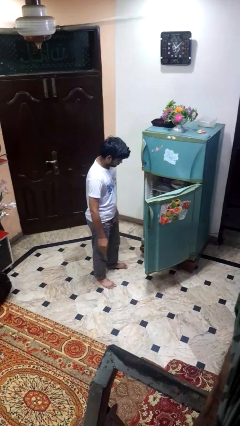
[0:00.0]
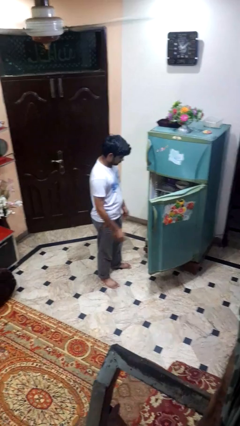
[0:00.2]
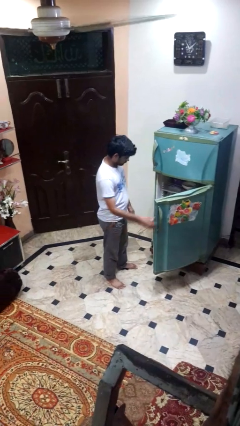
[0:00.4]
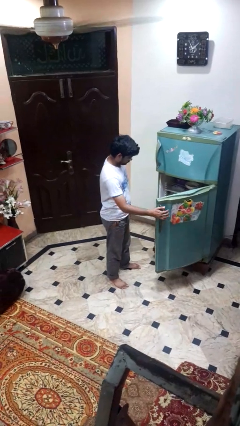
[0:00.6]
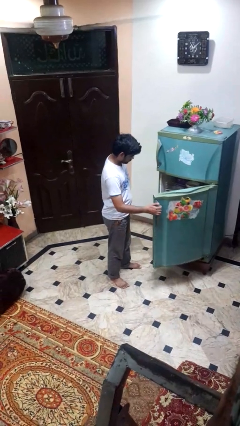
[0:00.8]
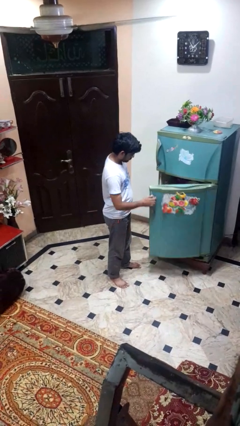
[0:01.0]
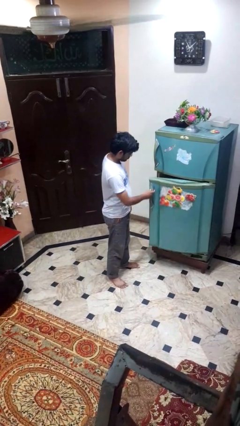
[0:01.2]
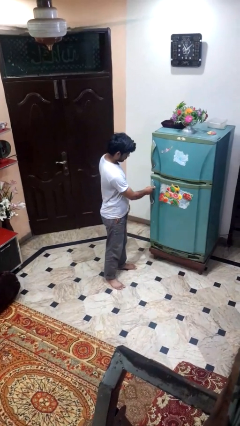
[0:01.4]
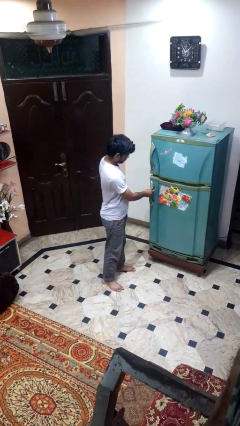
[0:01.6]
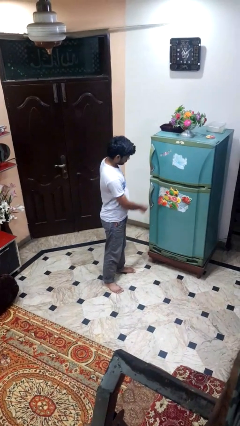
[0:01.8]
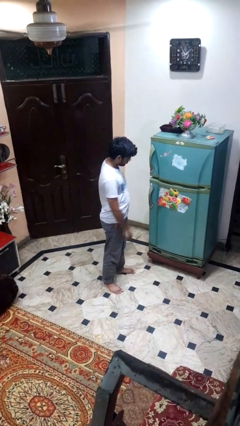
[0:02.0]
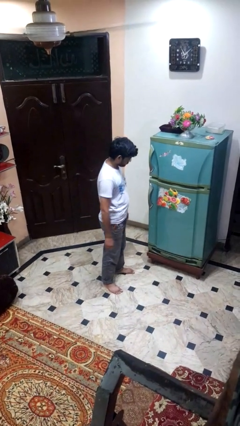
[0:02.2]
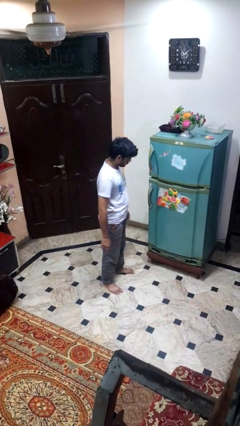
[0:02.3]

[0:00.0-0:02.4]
person closes refrigerator

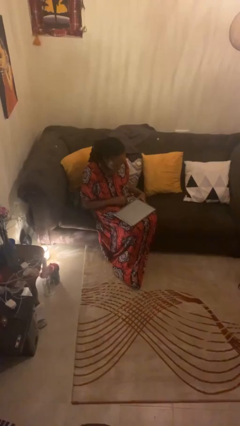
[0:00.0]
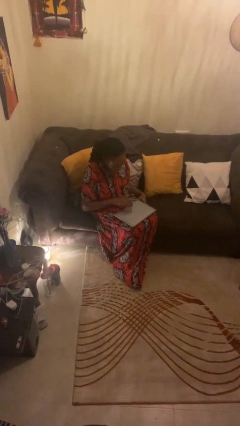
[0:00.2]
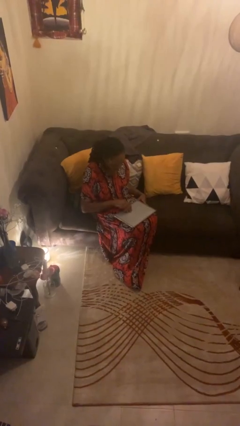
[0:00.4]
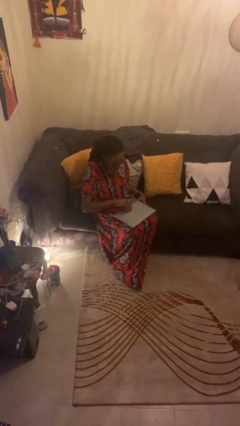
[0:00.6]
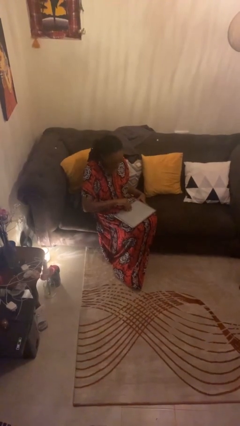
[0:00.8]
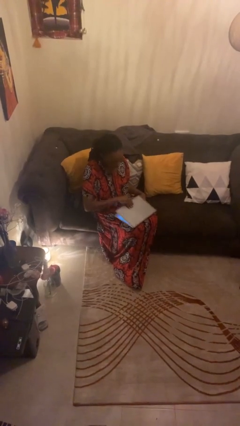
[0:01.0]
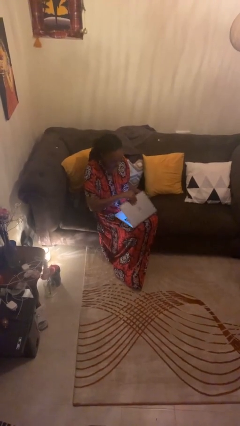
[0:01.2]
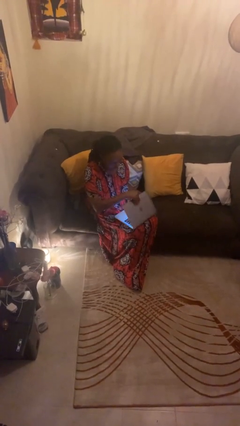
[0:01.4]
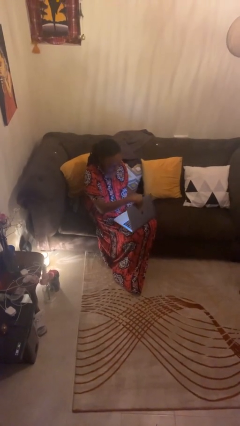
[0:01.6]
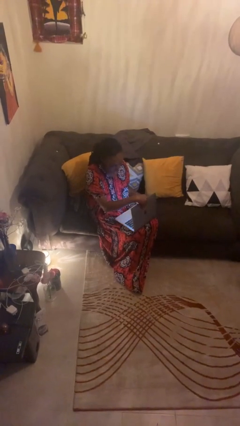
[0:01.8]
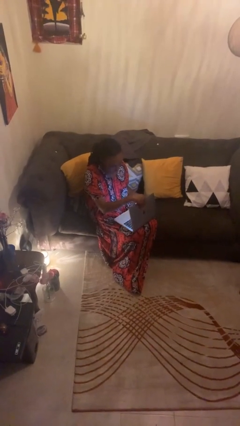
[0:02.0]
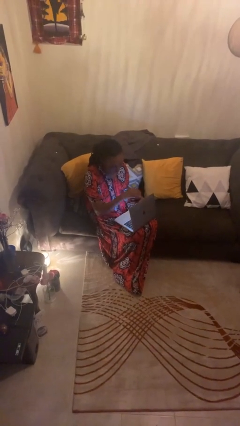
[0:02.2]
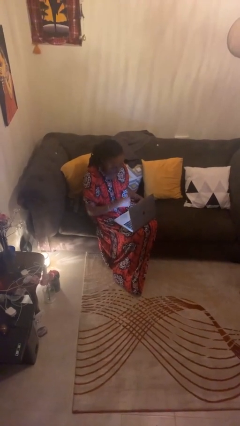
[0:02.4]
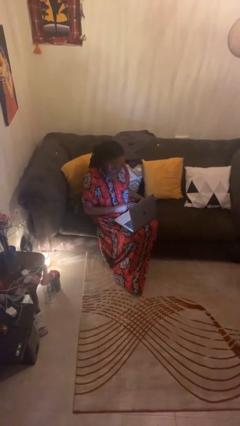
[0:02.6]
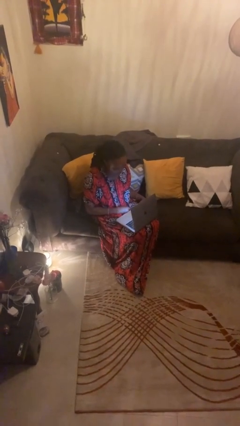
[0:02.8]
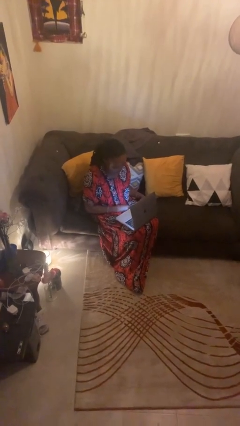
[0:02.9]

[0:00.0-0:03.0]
person opens laptop

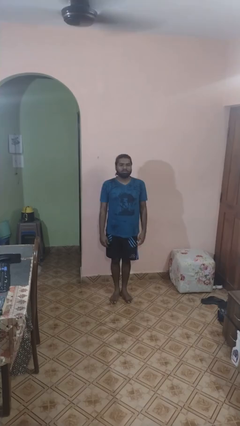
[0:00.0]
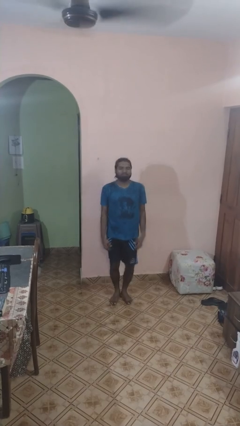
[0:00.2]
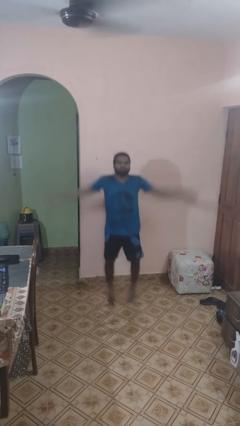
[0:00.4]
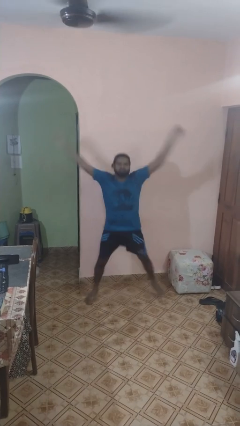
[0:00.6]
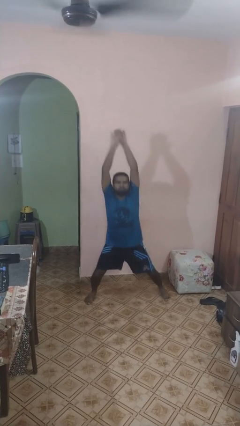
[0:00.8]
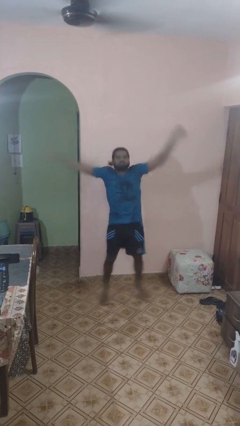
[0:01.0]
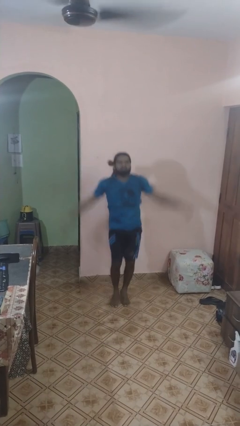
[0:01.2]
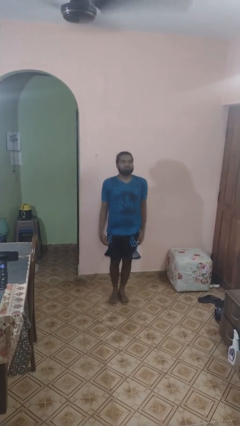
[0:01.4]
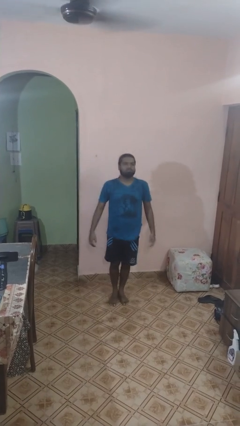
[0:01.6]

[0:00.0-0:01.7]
person exercises with jumping jacks

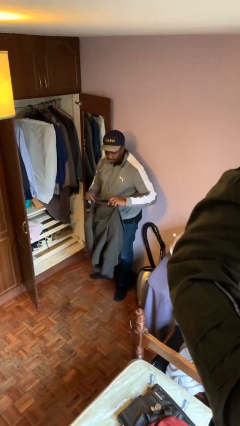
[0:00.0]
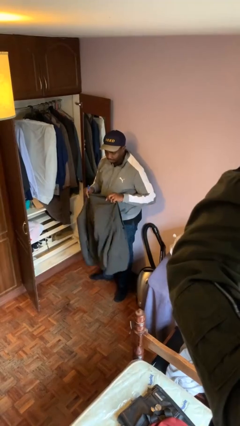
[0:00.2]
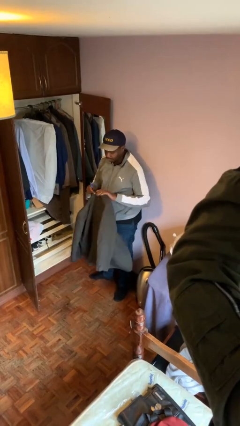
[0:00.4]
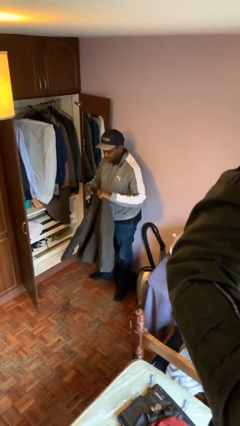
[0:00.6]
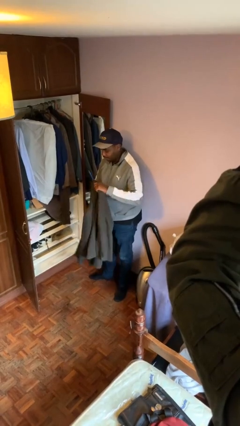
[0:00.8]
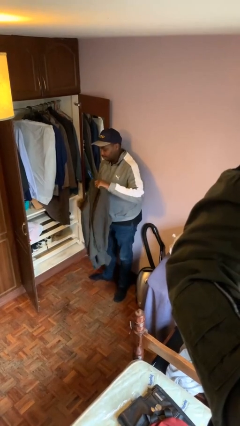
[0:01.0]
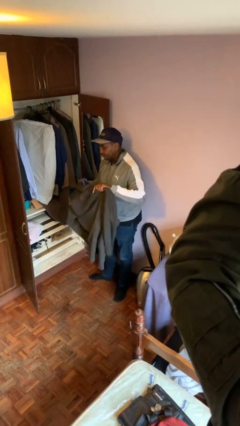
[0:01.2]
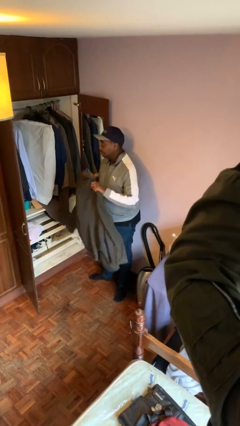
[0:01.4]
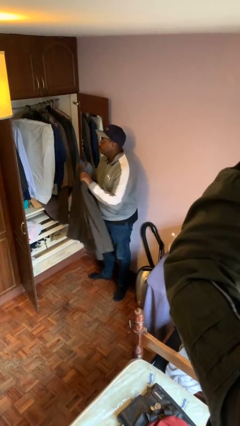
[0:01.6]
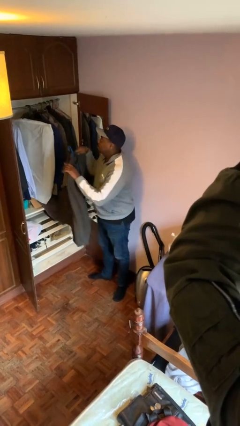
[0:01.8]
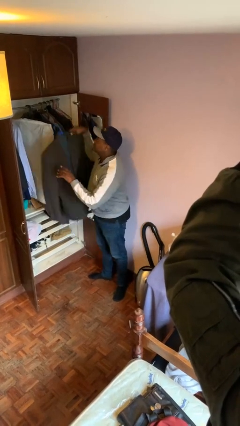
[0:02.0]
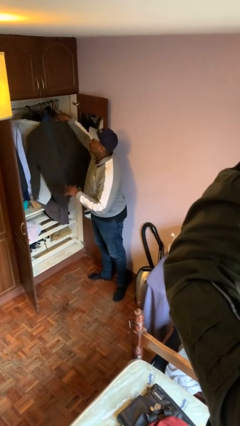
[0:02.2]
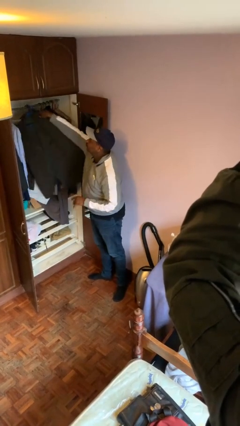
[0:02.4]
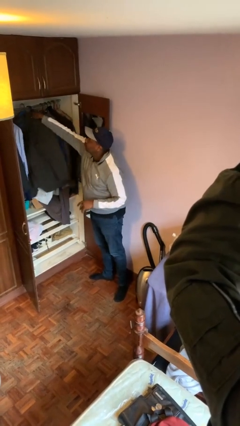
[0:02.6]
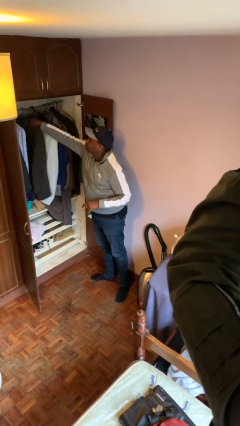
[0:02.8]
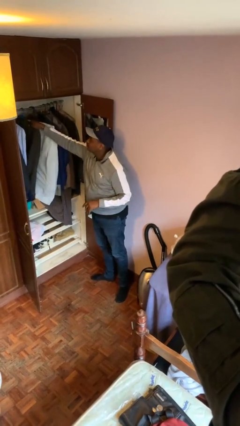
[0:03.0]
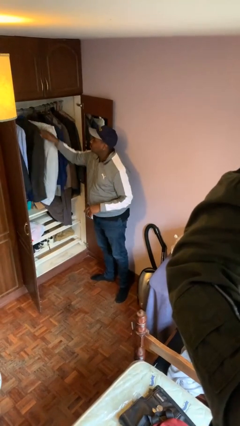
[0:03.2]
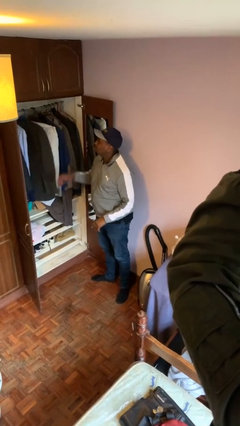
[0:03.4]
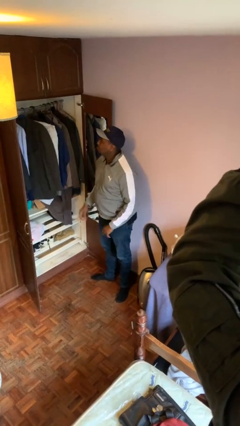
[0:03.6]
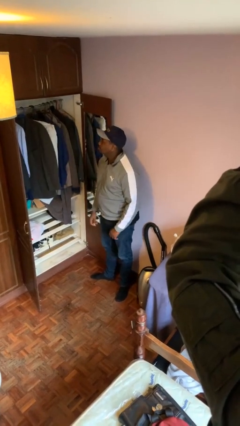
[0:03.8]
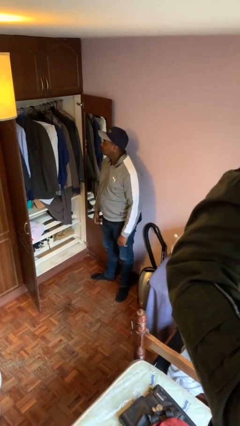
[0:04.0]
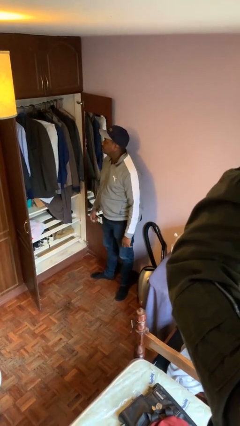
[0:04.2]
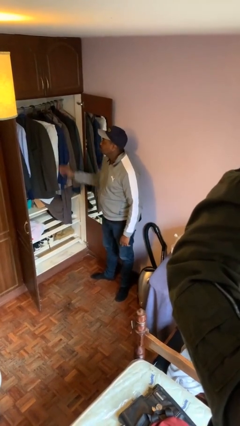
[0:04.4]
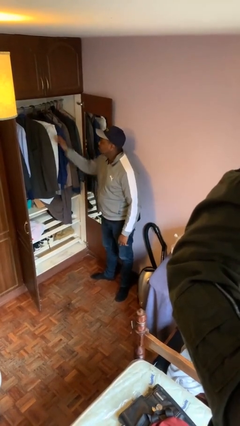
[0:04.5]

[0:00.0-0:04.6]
person puts clothes into closet

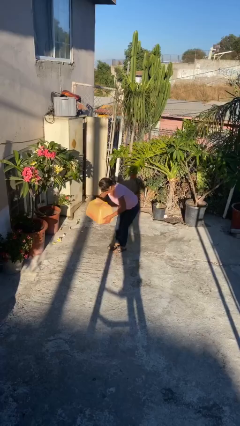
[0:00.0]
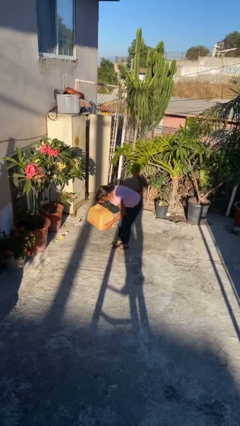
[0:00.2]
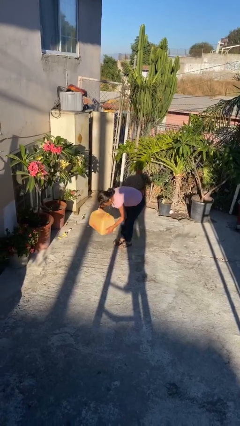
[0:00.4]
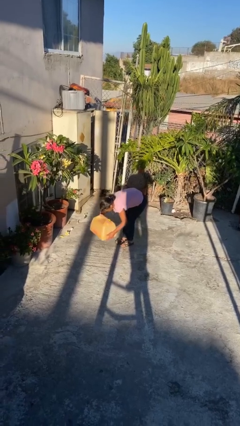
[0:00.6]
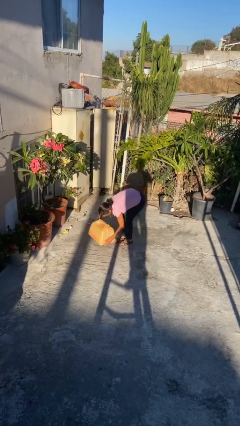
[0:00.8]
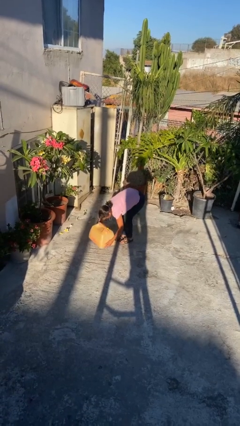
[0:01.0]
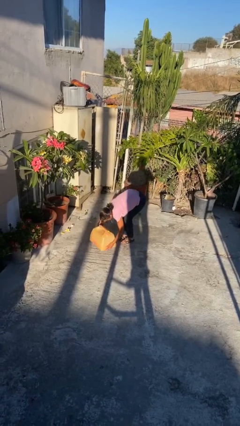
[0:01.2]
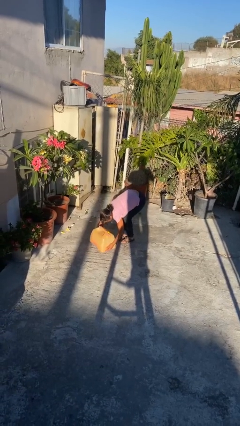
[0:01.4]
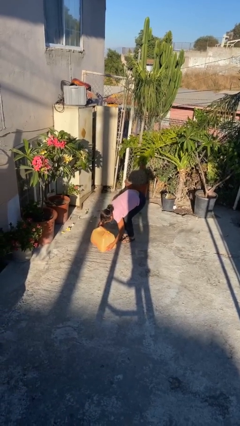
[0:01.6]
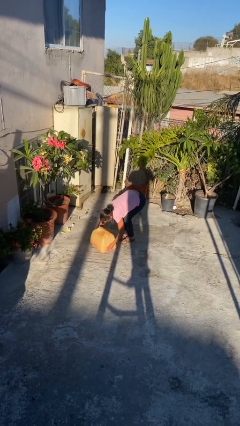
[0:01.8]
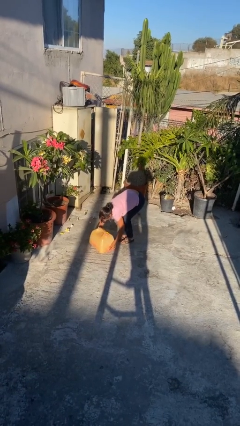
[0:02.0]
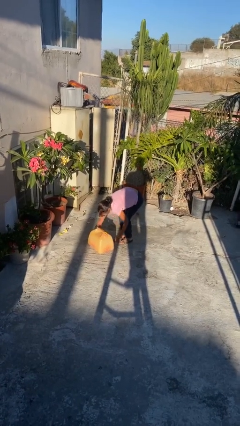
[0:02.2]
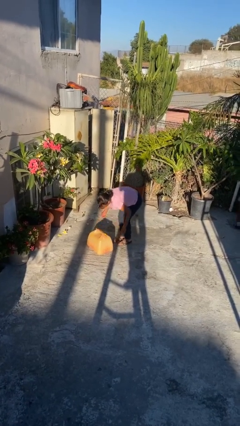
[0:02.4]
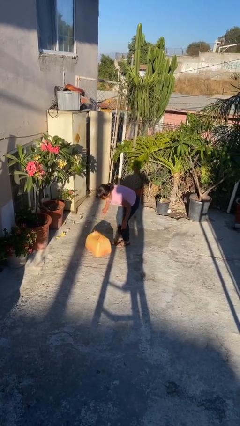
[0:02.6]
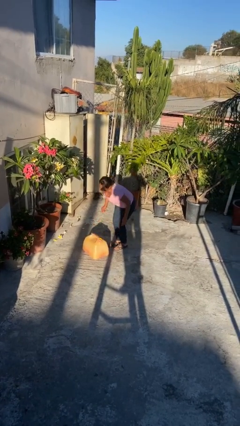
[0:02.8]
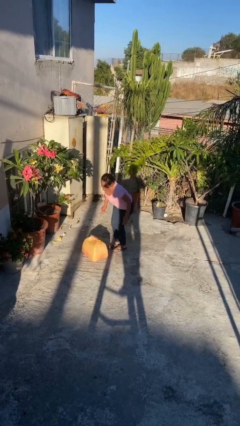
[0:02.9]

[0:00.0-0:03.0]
person puts down object on floor

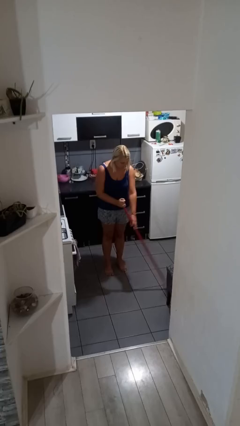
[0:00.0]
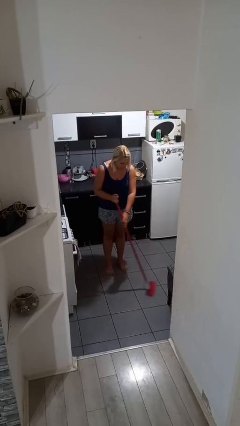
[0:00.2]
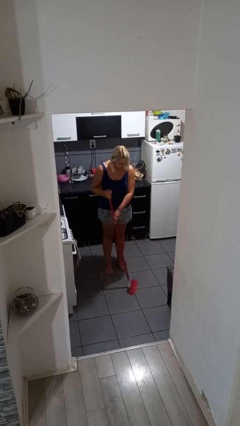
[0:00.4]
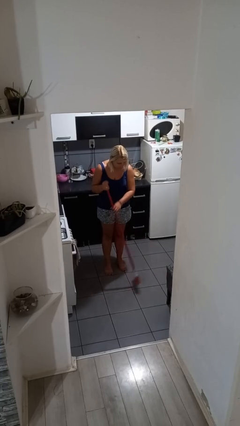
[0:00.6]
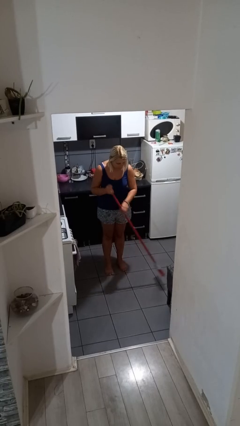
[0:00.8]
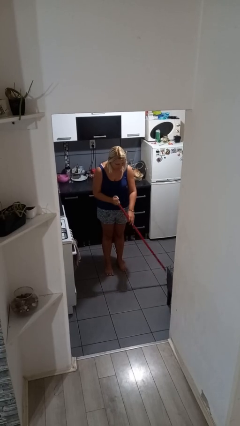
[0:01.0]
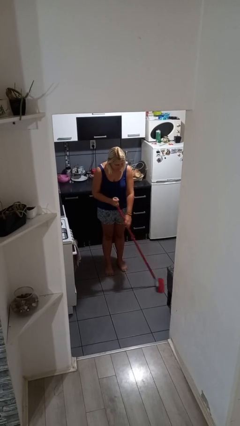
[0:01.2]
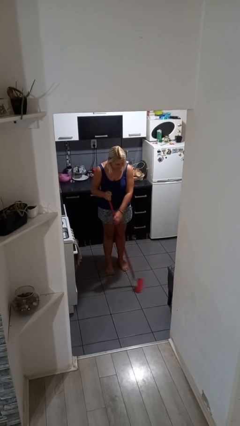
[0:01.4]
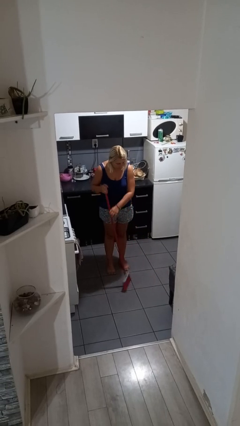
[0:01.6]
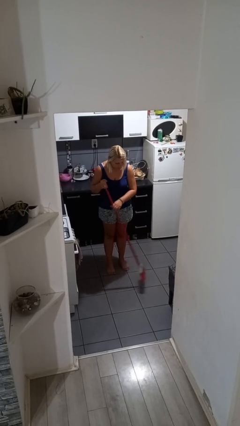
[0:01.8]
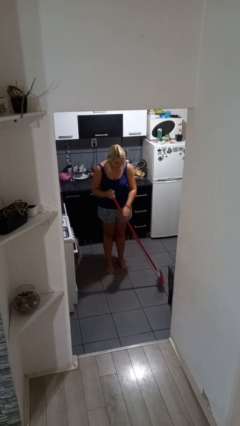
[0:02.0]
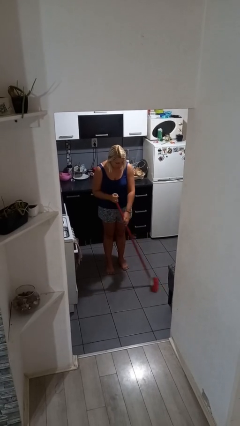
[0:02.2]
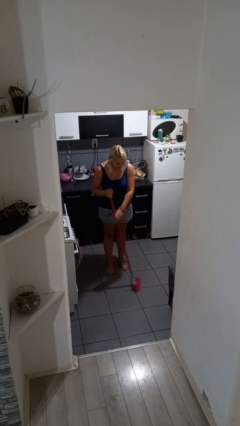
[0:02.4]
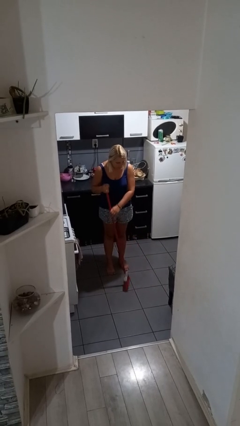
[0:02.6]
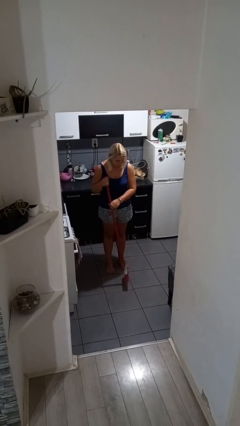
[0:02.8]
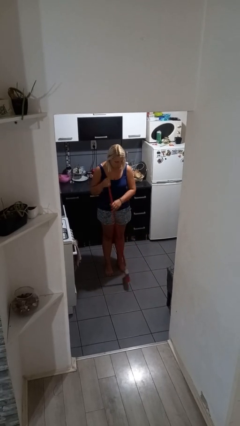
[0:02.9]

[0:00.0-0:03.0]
person sweeps floor
